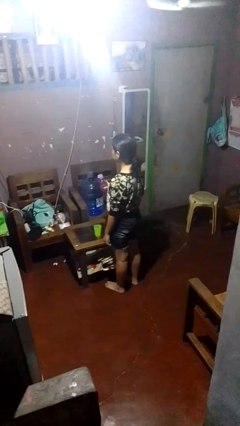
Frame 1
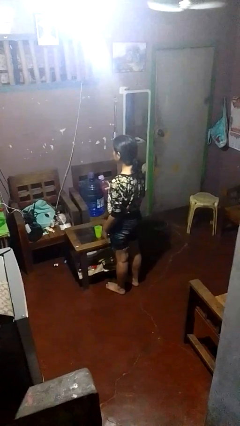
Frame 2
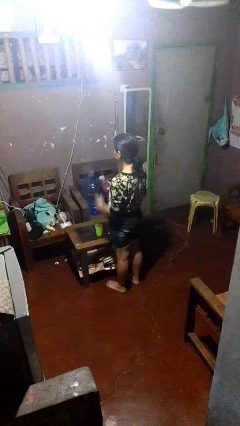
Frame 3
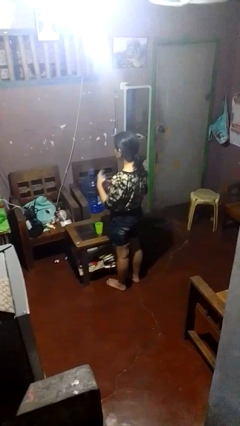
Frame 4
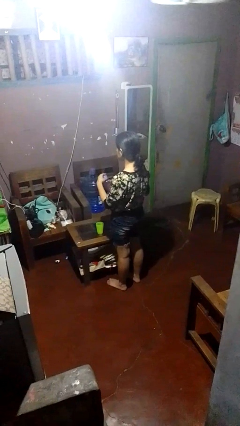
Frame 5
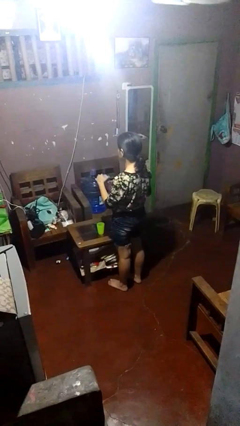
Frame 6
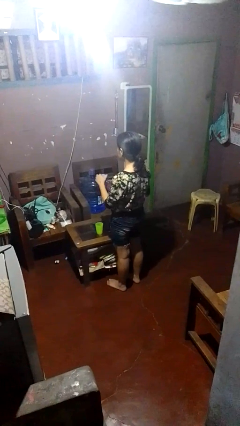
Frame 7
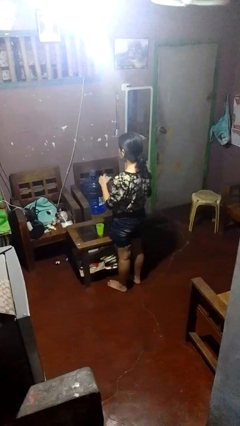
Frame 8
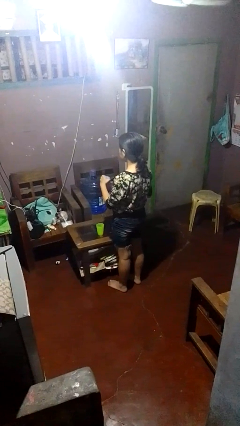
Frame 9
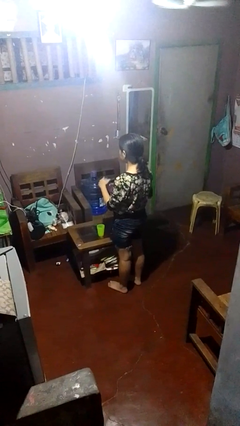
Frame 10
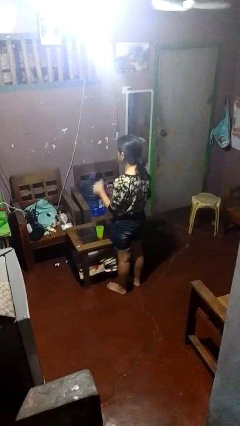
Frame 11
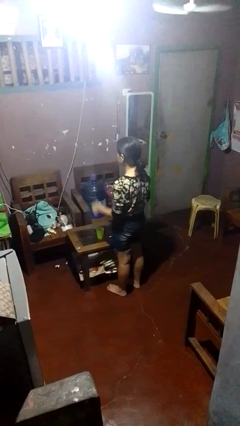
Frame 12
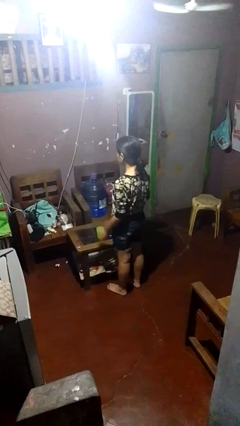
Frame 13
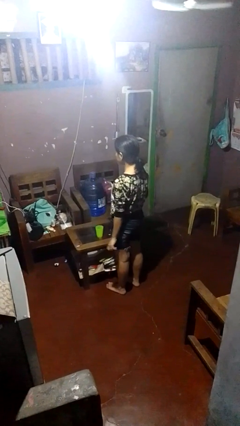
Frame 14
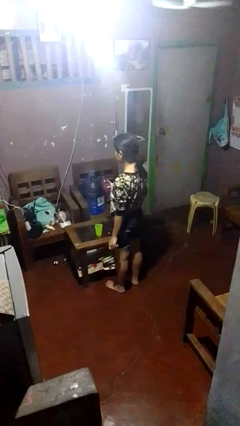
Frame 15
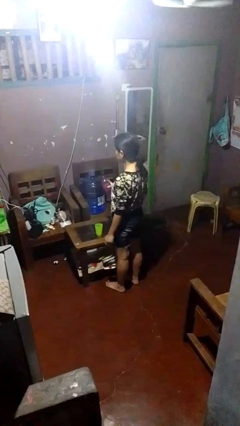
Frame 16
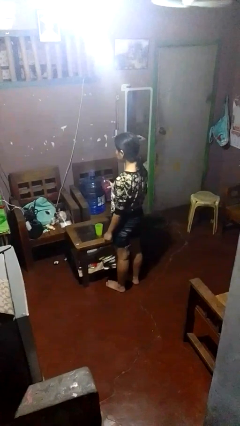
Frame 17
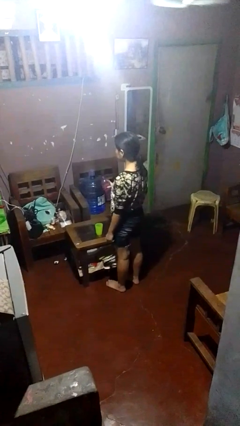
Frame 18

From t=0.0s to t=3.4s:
person unscrews lid from bottle

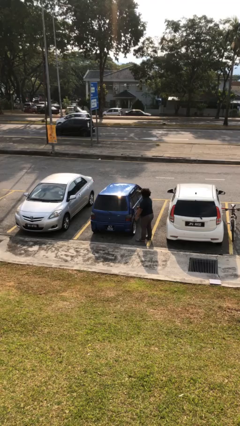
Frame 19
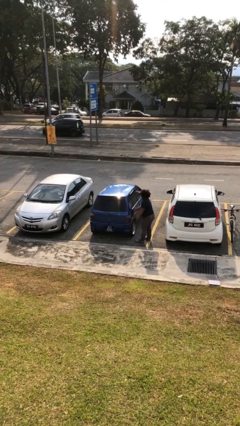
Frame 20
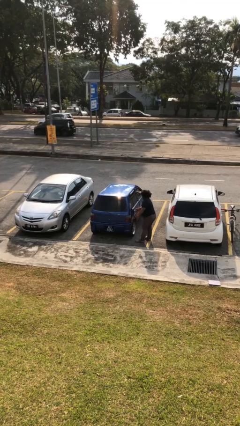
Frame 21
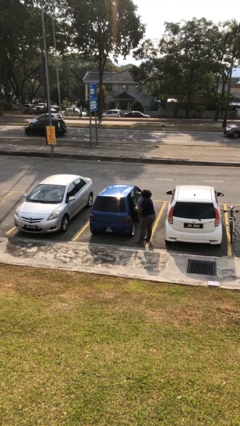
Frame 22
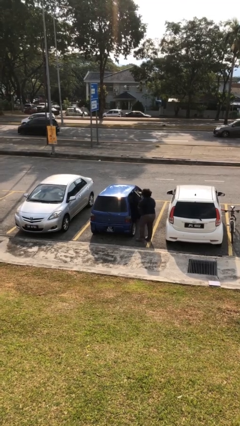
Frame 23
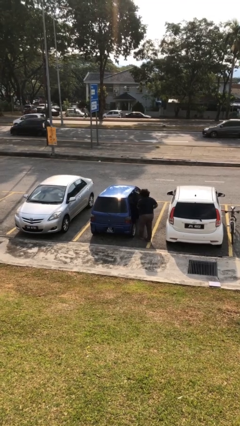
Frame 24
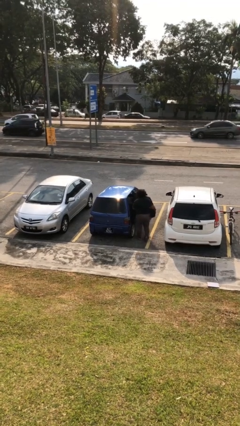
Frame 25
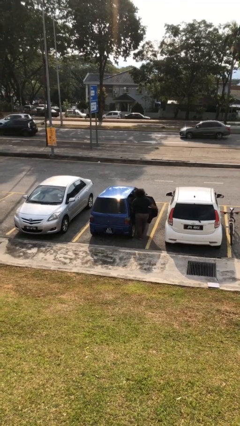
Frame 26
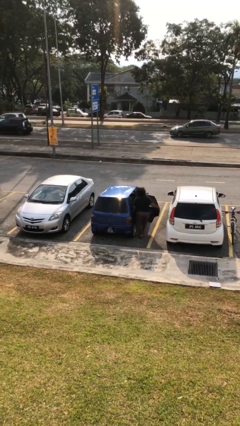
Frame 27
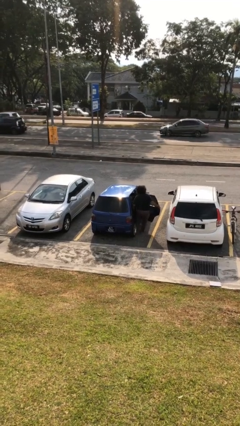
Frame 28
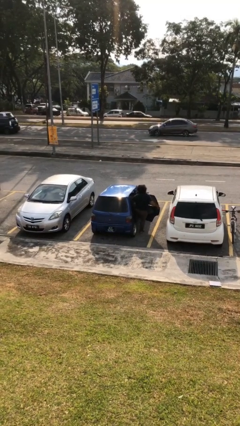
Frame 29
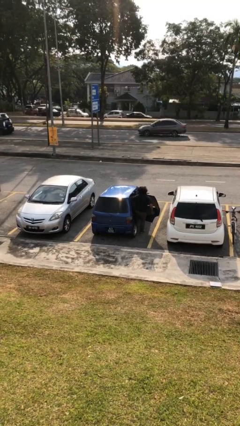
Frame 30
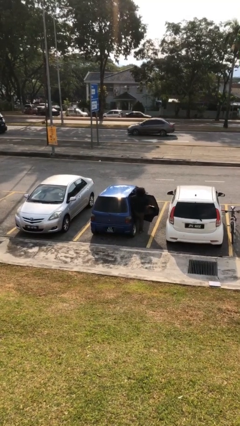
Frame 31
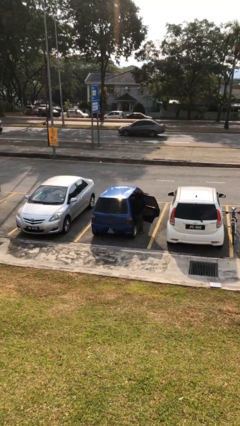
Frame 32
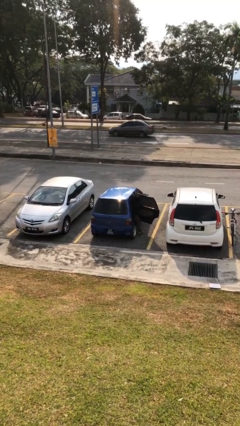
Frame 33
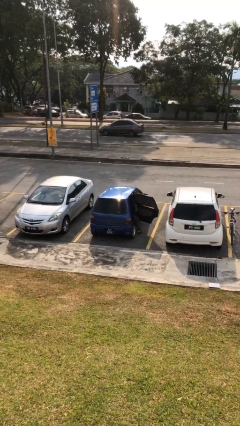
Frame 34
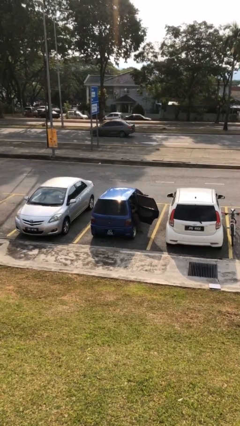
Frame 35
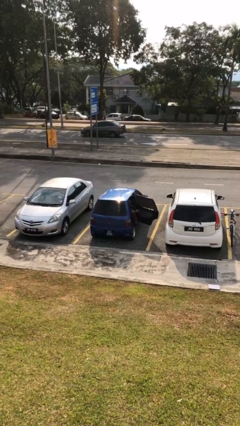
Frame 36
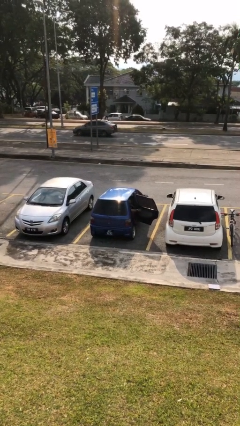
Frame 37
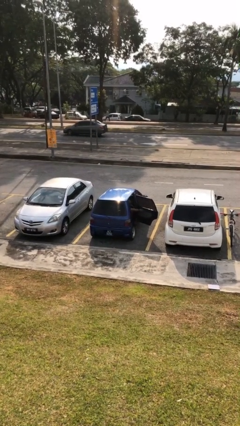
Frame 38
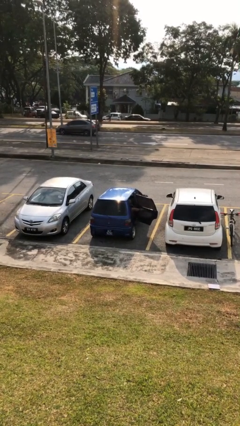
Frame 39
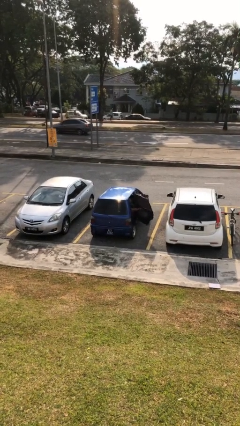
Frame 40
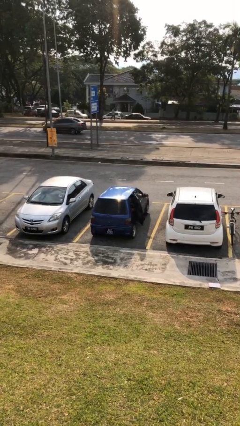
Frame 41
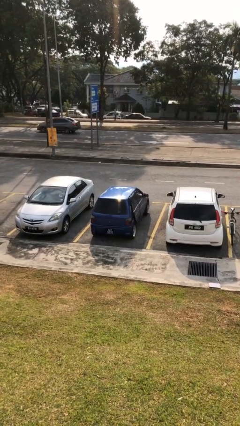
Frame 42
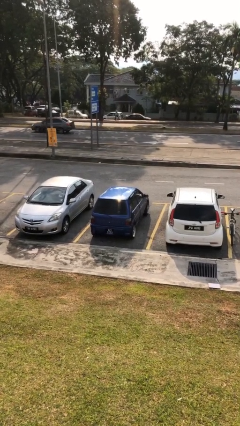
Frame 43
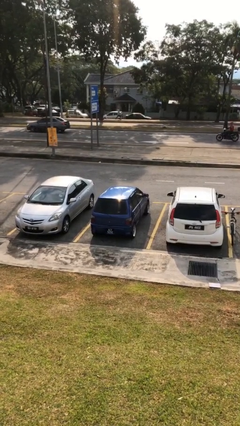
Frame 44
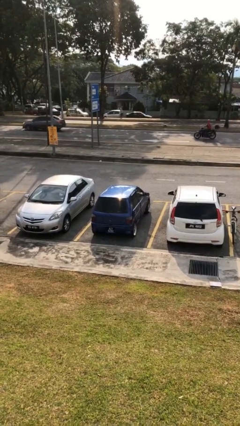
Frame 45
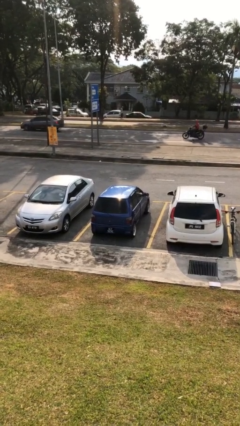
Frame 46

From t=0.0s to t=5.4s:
car picks up person

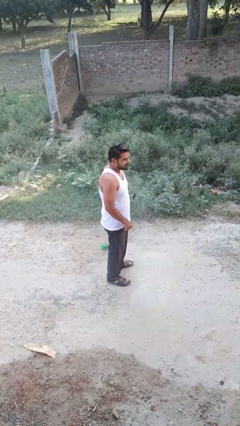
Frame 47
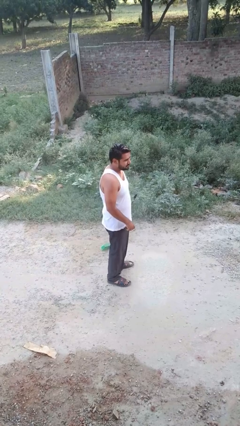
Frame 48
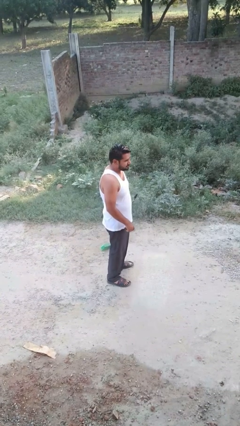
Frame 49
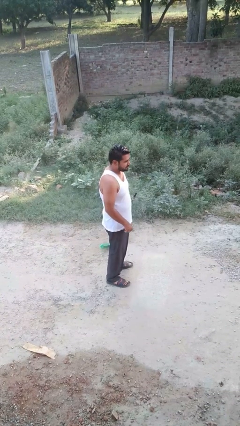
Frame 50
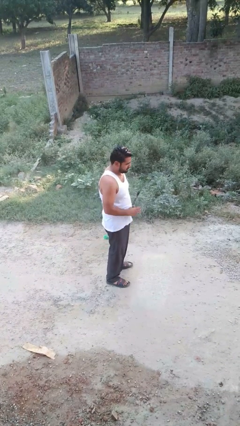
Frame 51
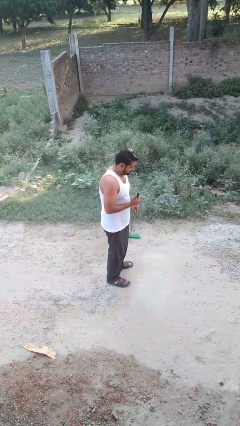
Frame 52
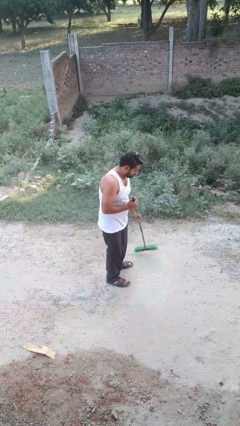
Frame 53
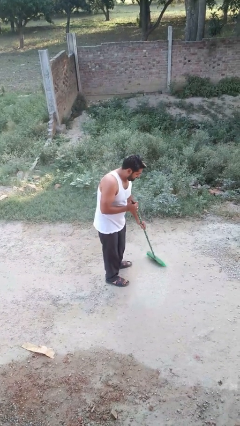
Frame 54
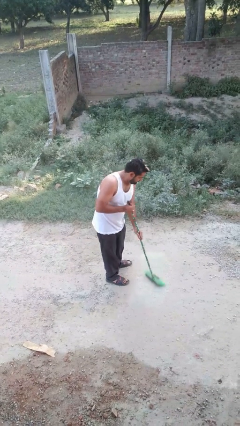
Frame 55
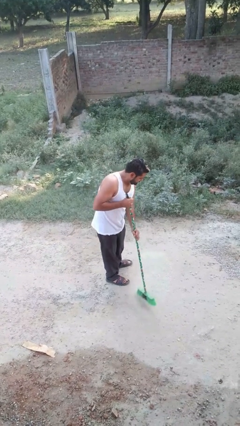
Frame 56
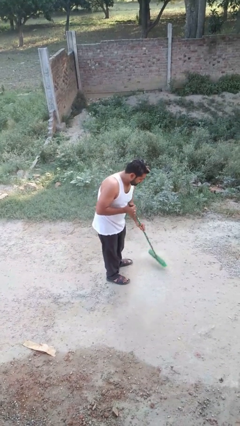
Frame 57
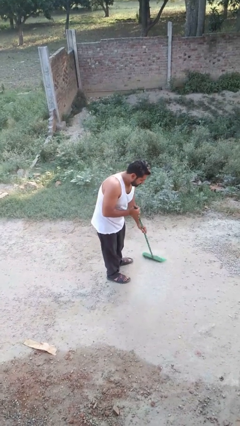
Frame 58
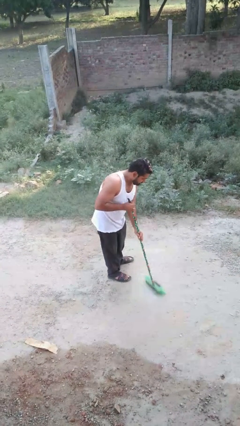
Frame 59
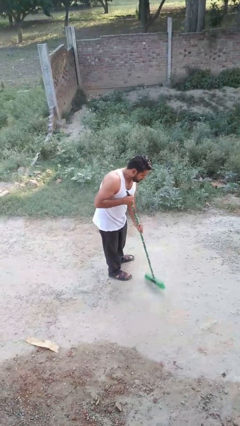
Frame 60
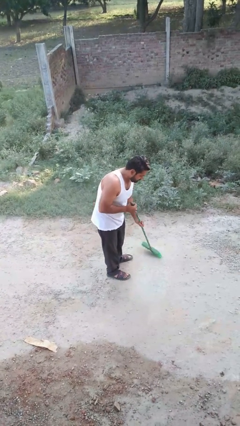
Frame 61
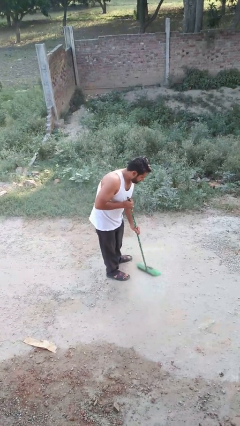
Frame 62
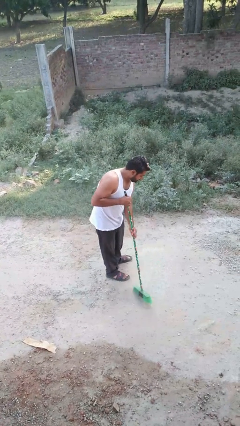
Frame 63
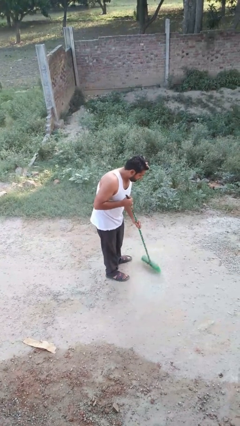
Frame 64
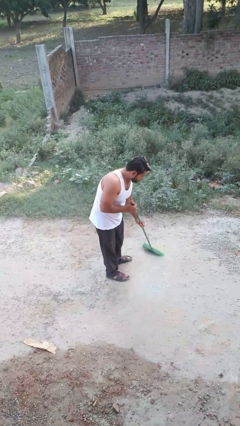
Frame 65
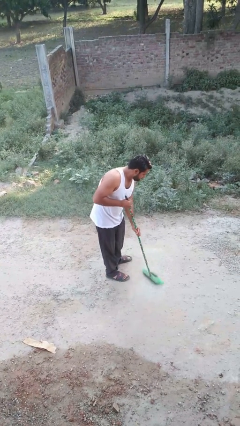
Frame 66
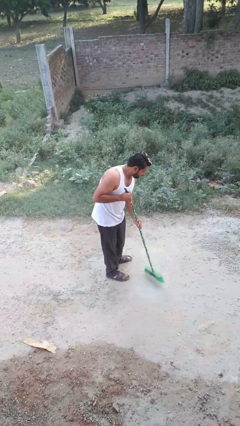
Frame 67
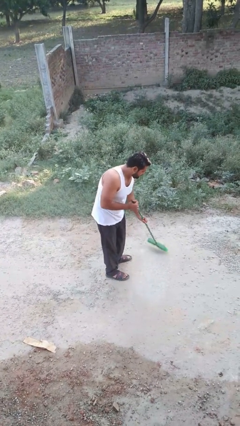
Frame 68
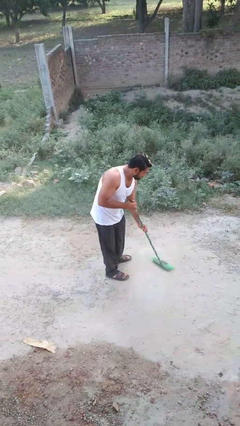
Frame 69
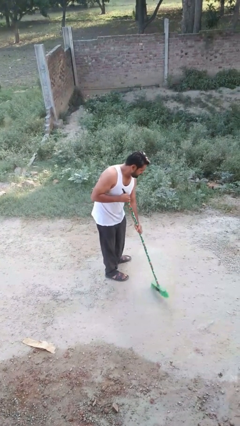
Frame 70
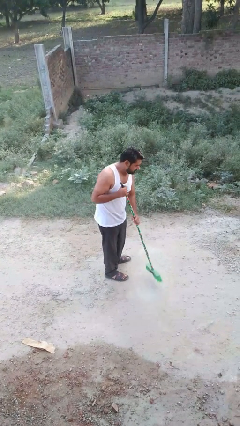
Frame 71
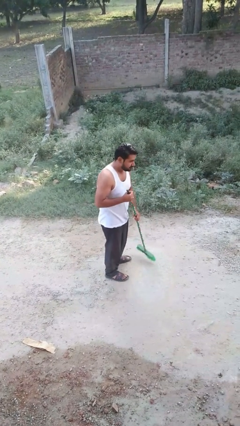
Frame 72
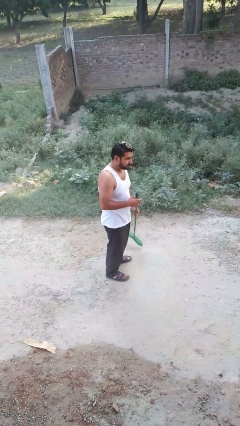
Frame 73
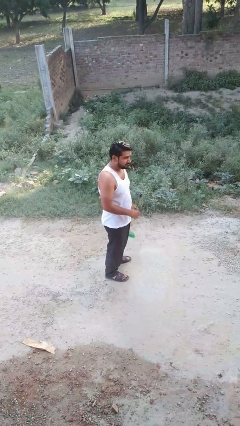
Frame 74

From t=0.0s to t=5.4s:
person sweeps floor

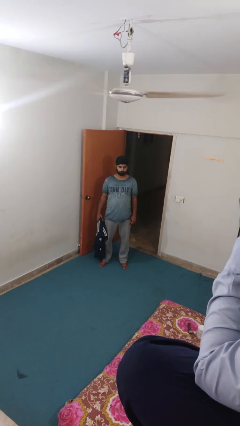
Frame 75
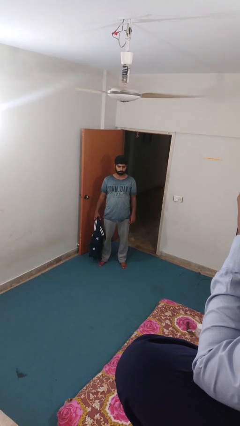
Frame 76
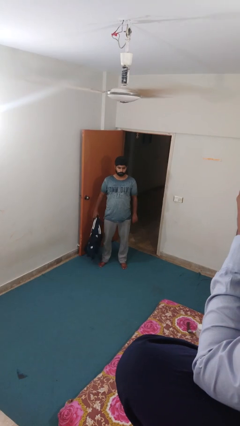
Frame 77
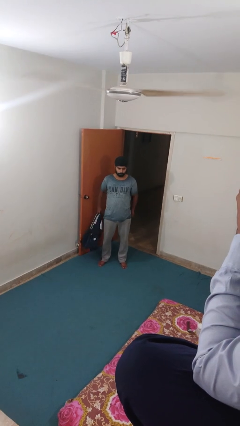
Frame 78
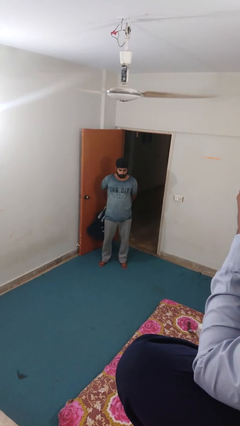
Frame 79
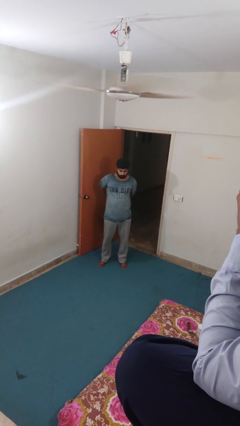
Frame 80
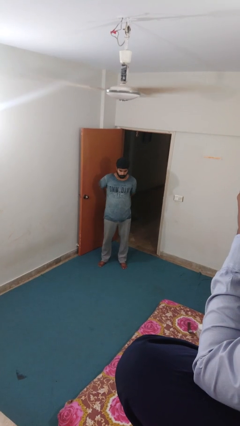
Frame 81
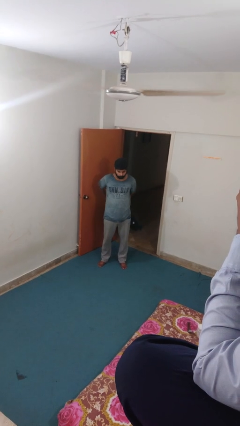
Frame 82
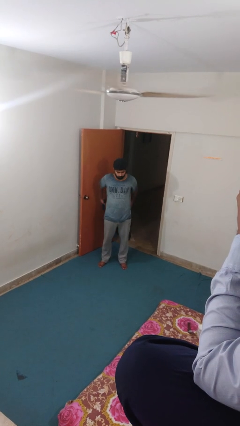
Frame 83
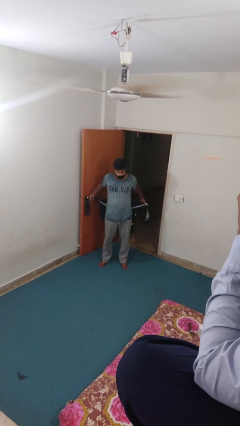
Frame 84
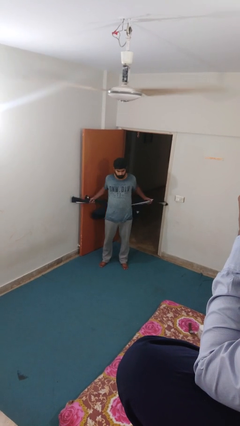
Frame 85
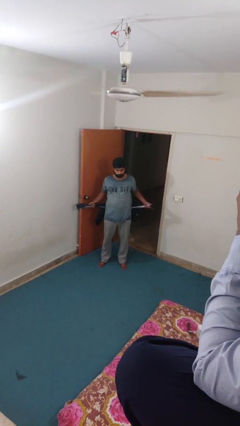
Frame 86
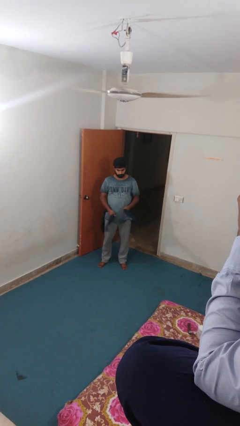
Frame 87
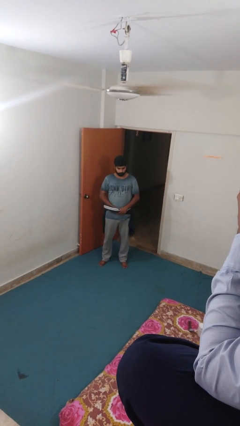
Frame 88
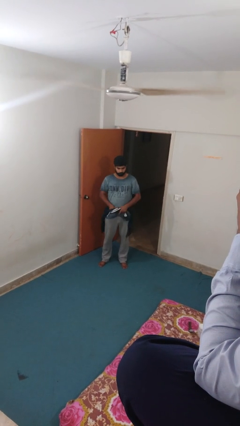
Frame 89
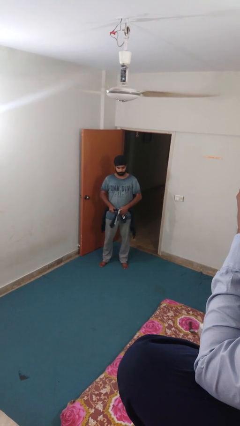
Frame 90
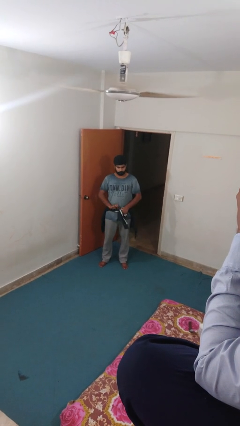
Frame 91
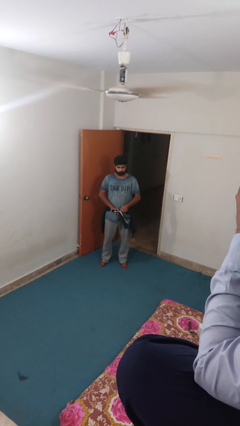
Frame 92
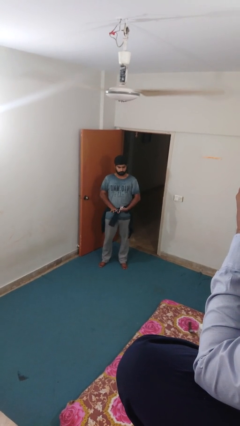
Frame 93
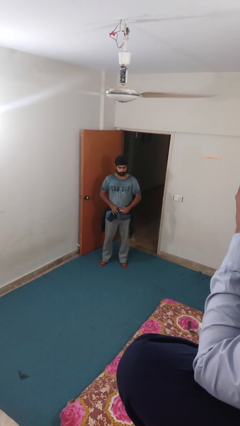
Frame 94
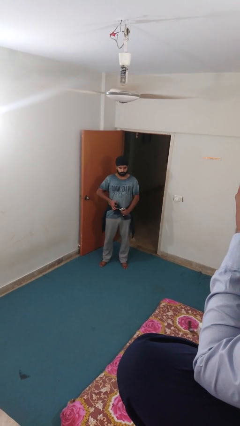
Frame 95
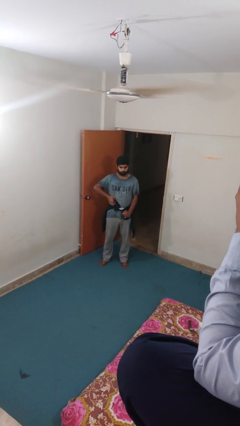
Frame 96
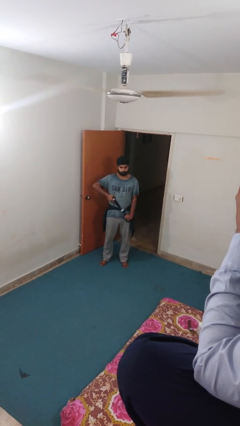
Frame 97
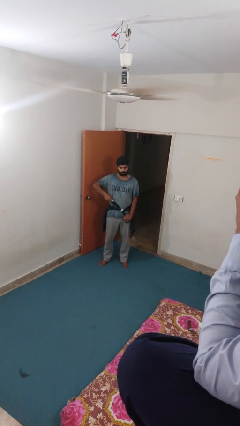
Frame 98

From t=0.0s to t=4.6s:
person ties jacket around waist
